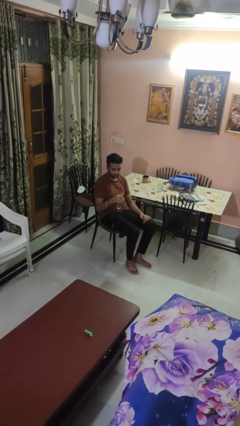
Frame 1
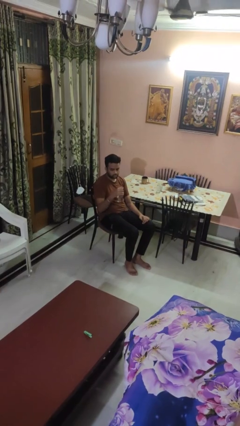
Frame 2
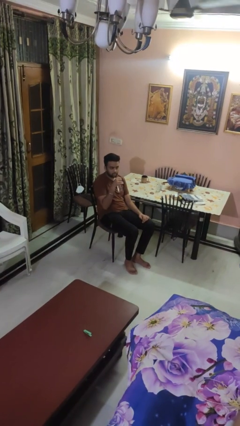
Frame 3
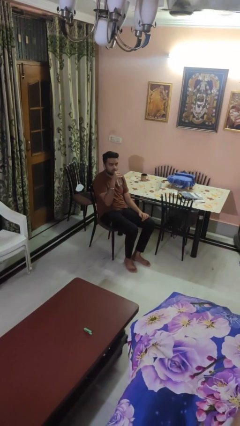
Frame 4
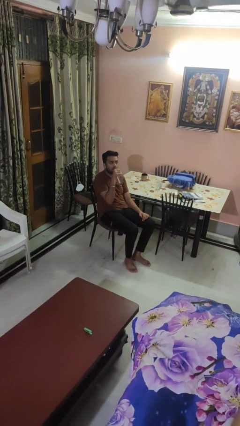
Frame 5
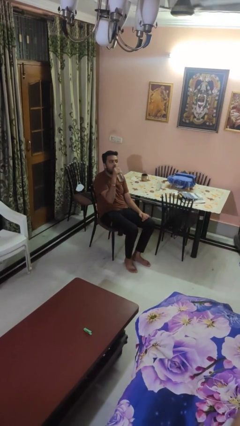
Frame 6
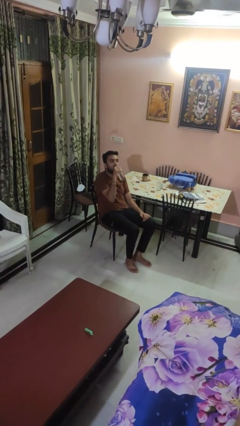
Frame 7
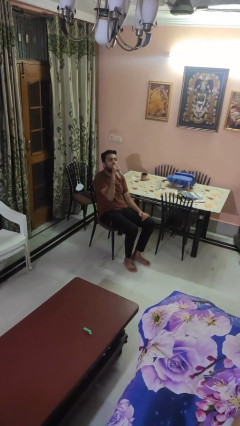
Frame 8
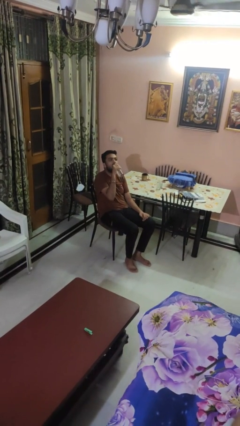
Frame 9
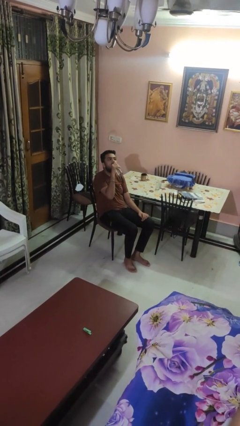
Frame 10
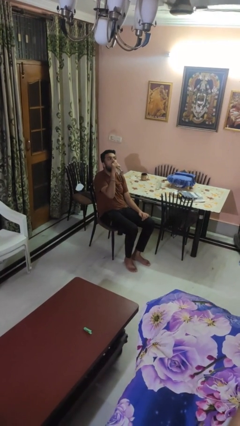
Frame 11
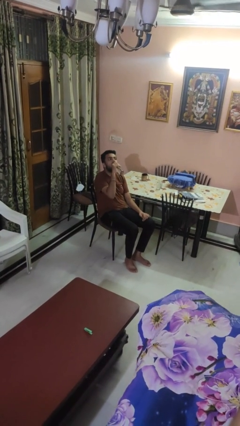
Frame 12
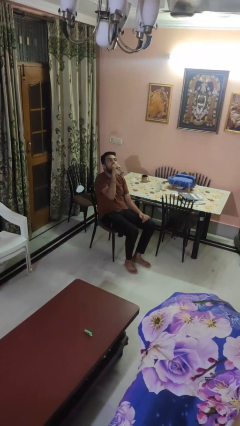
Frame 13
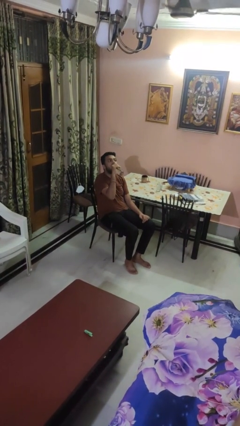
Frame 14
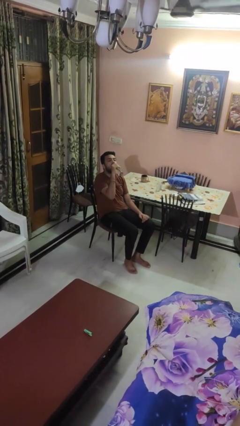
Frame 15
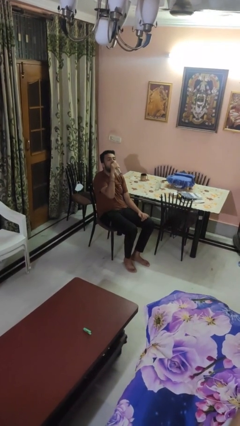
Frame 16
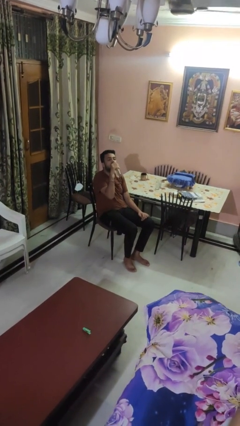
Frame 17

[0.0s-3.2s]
person drinks from bottle

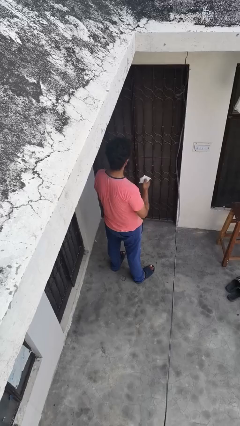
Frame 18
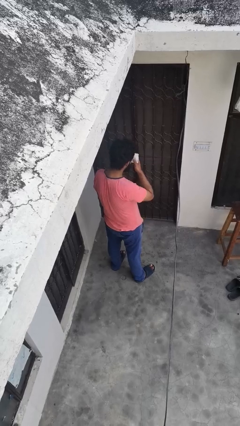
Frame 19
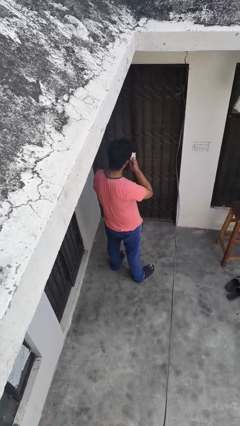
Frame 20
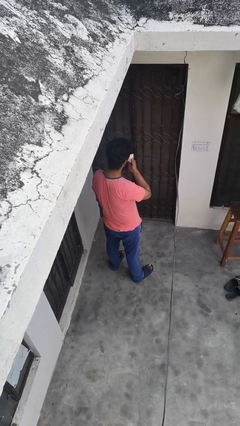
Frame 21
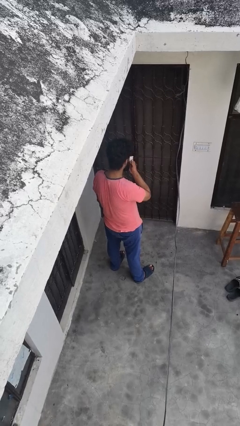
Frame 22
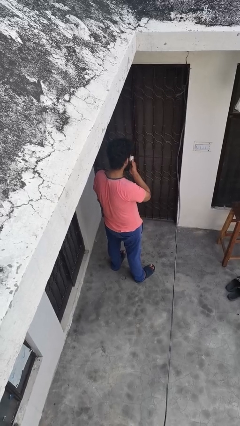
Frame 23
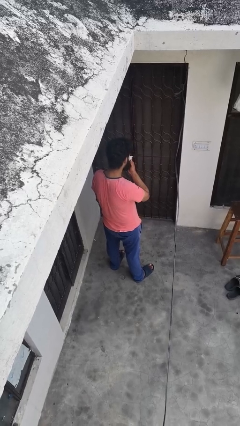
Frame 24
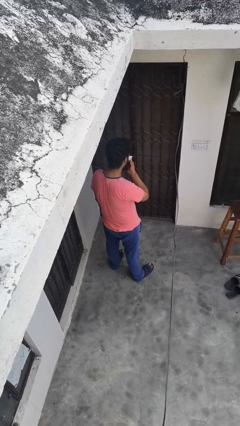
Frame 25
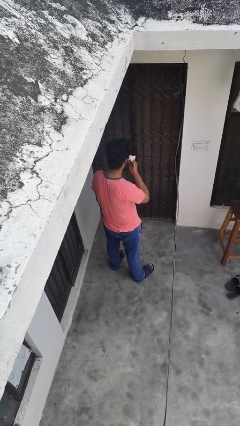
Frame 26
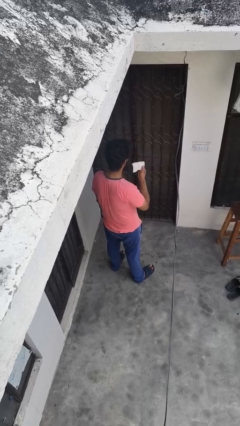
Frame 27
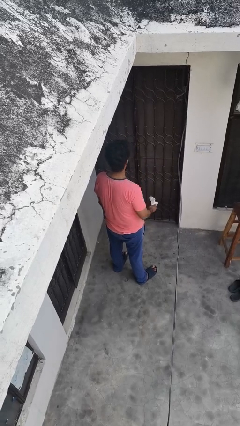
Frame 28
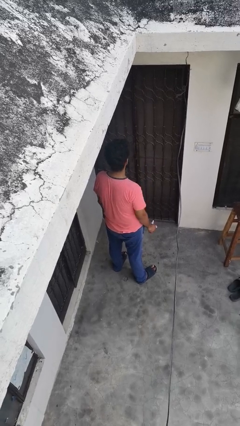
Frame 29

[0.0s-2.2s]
person wipes mouth with napkin

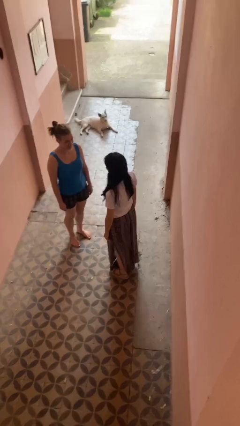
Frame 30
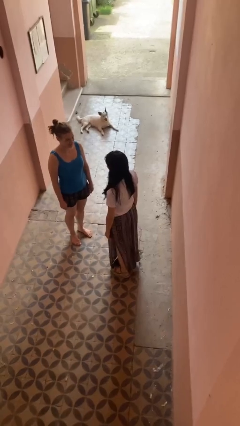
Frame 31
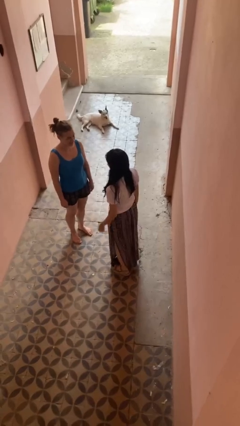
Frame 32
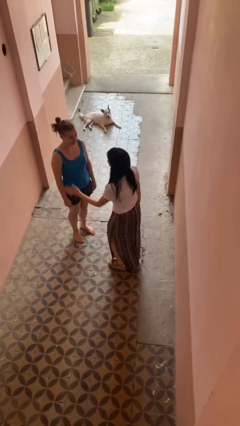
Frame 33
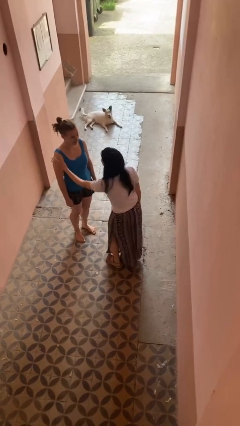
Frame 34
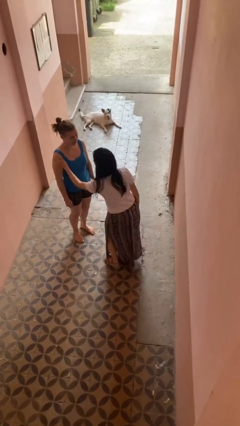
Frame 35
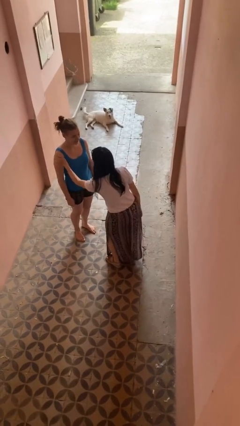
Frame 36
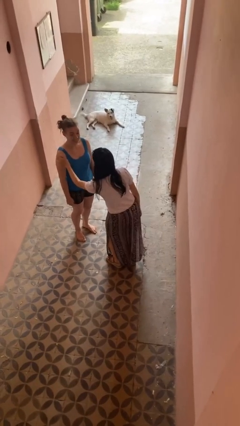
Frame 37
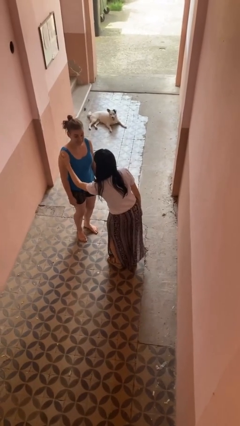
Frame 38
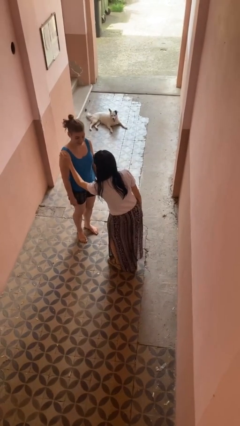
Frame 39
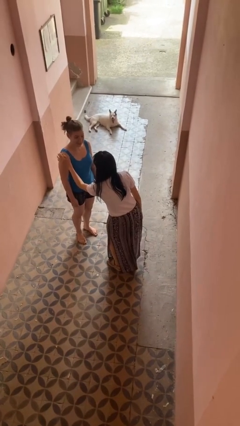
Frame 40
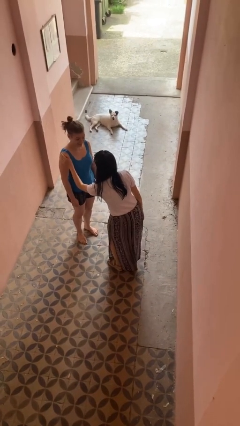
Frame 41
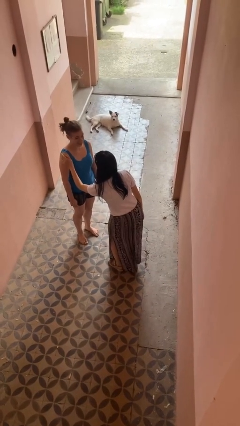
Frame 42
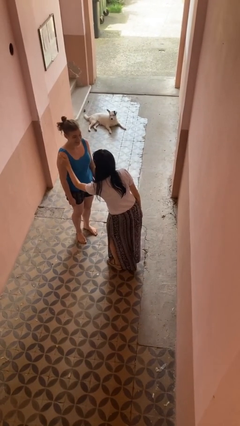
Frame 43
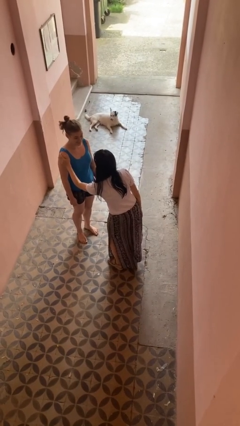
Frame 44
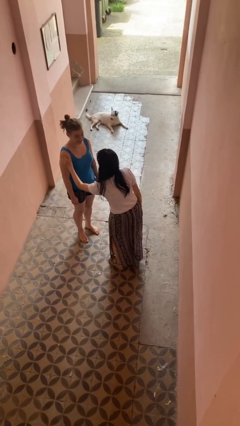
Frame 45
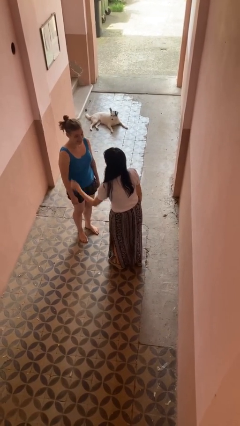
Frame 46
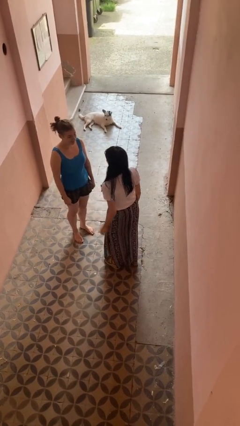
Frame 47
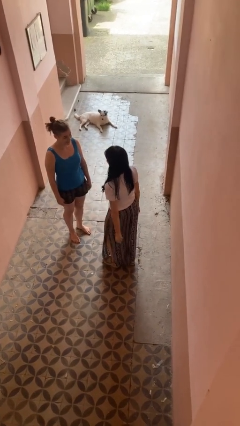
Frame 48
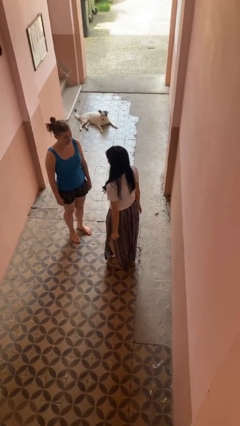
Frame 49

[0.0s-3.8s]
person pounds shoulders of person

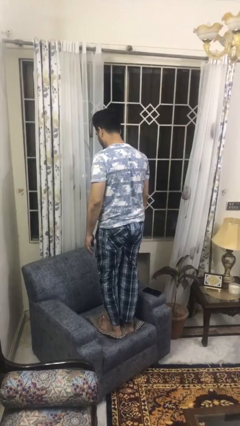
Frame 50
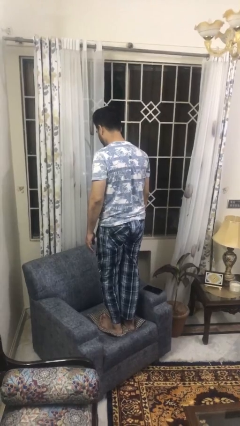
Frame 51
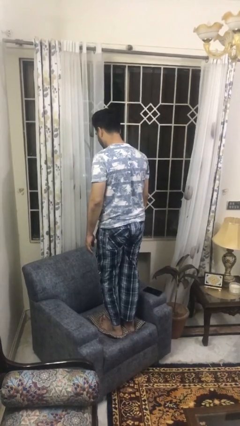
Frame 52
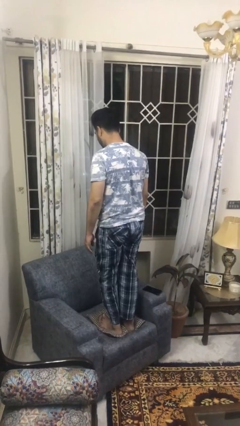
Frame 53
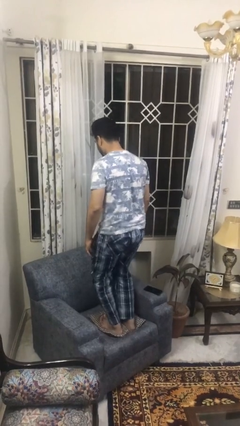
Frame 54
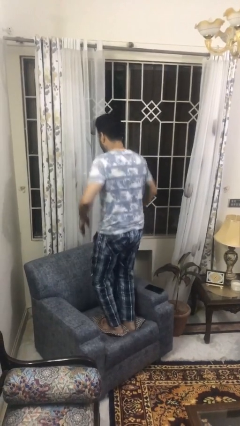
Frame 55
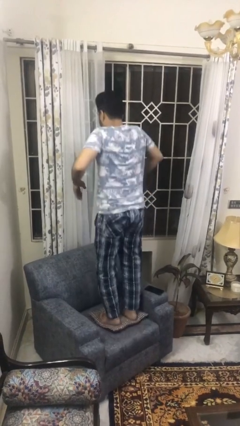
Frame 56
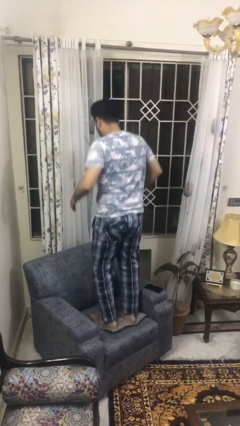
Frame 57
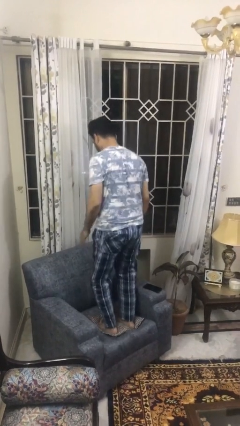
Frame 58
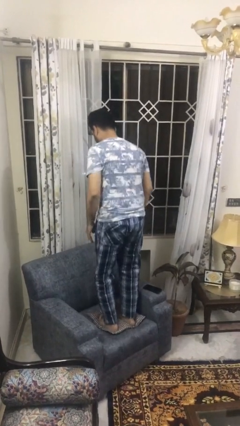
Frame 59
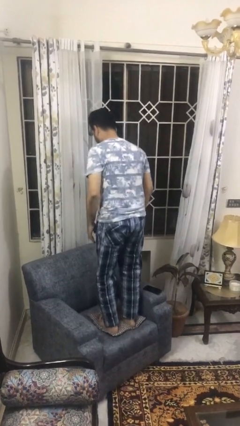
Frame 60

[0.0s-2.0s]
person jumps on couch

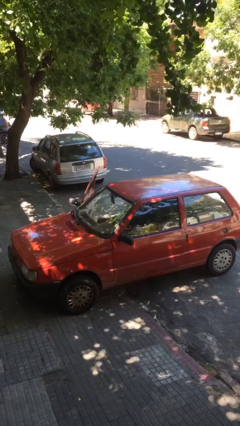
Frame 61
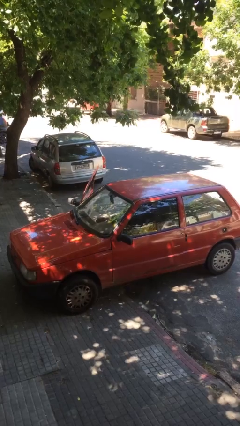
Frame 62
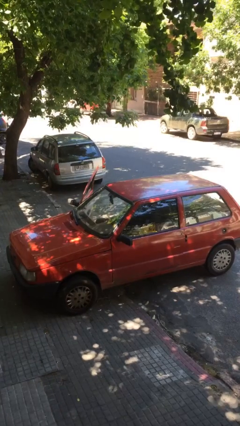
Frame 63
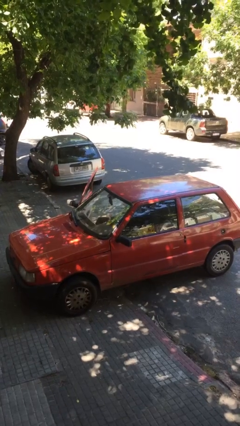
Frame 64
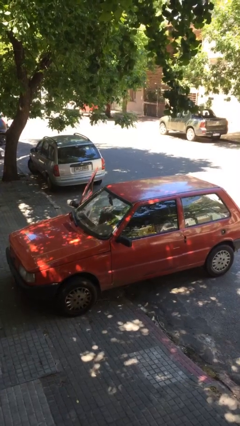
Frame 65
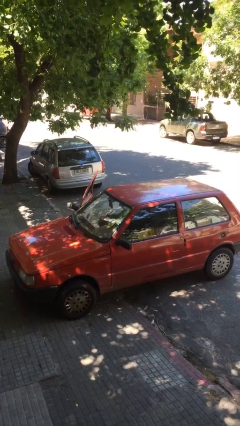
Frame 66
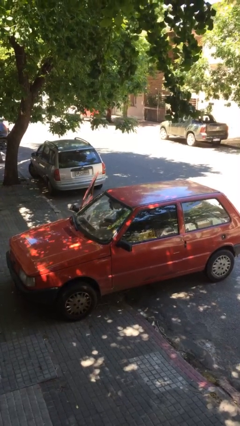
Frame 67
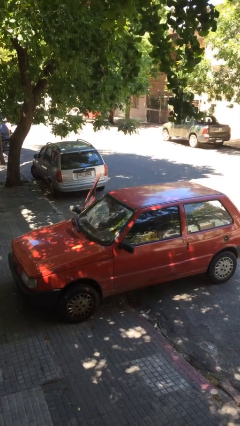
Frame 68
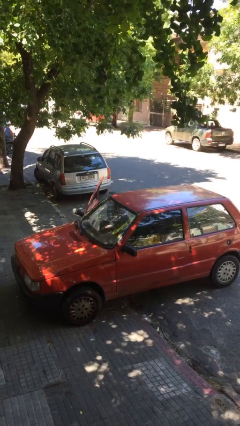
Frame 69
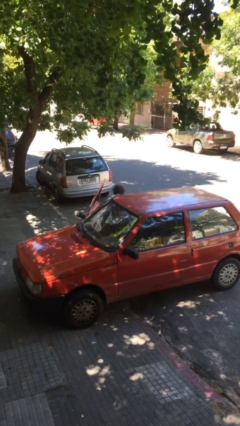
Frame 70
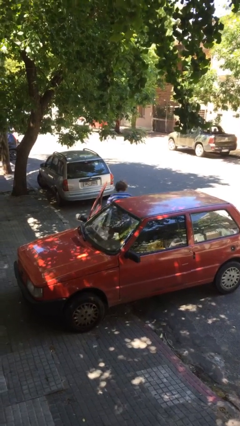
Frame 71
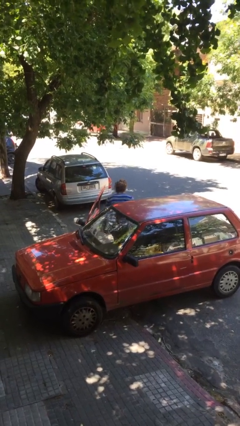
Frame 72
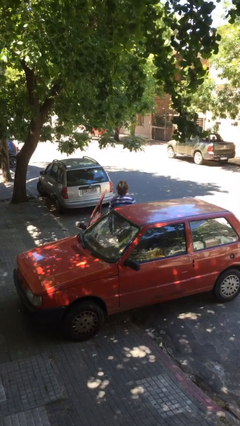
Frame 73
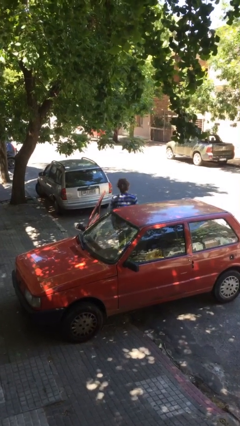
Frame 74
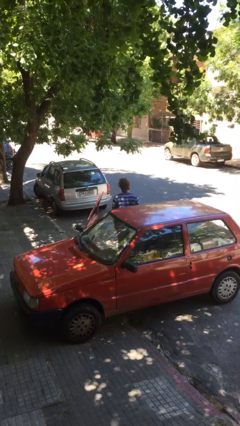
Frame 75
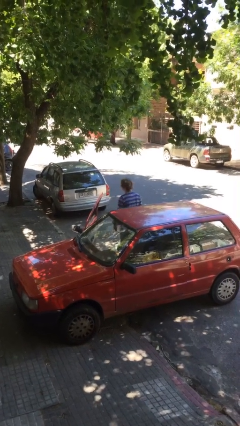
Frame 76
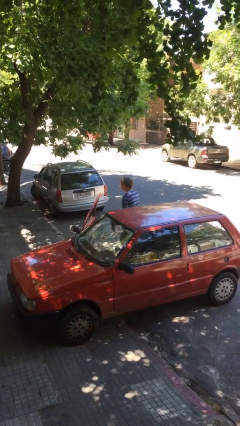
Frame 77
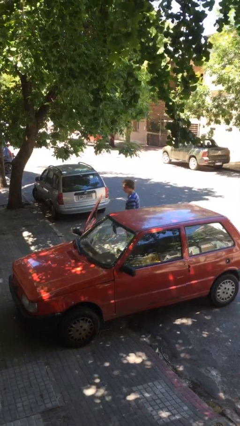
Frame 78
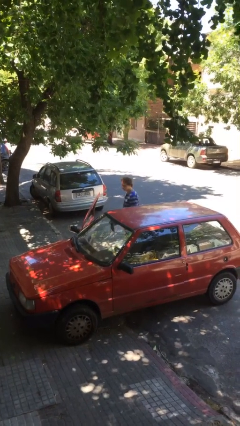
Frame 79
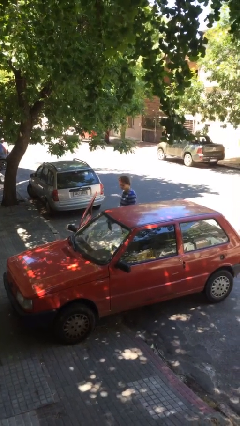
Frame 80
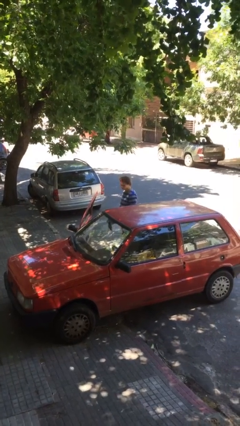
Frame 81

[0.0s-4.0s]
person exits car

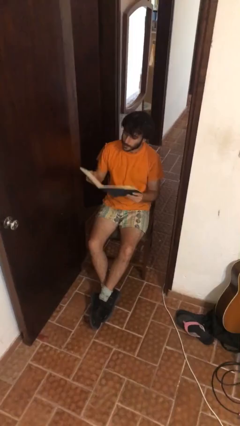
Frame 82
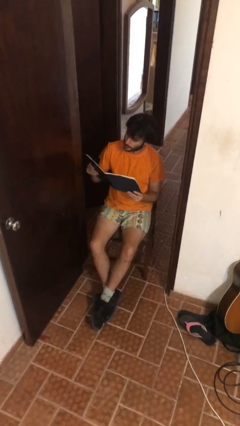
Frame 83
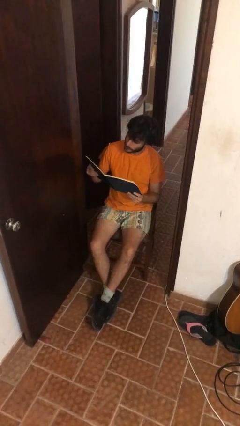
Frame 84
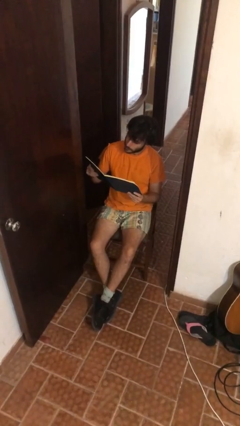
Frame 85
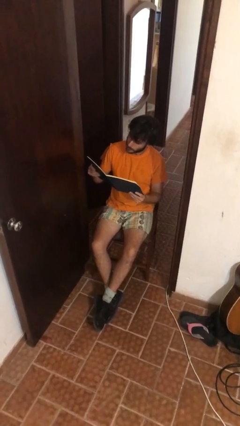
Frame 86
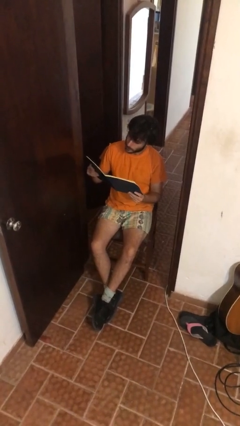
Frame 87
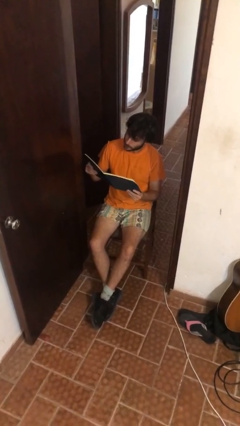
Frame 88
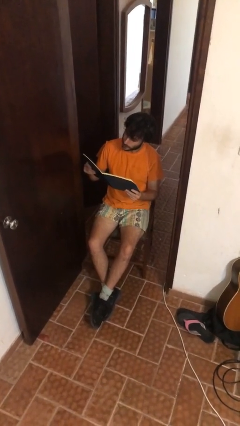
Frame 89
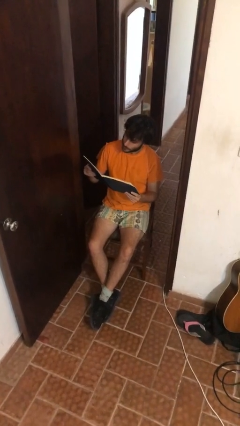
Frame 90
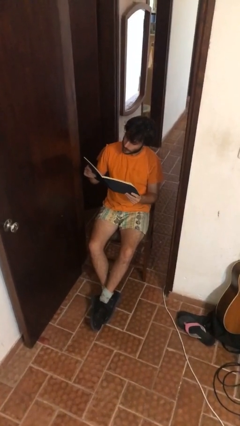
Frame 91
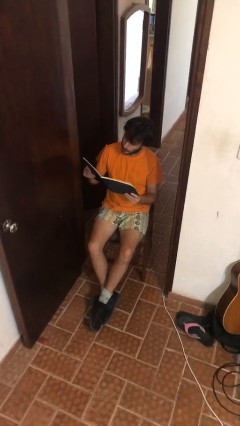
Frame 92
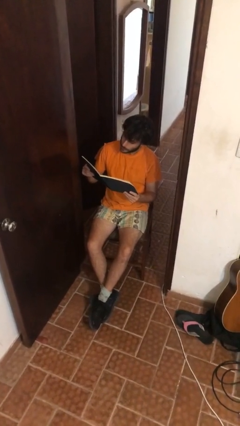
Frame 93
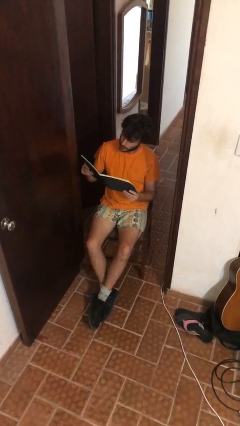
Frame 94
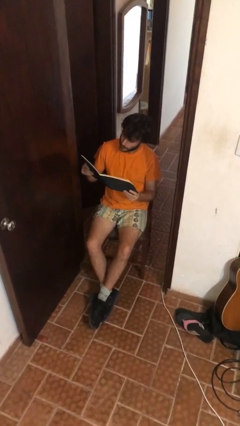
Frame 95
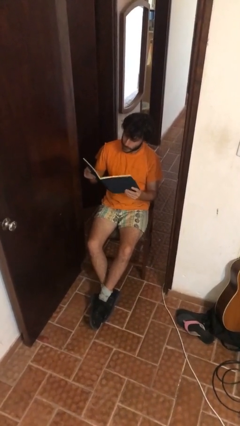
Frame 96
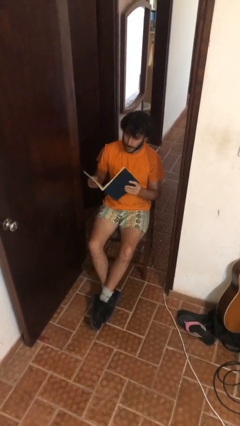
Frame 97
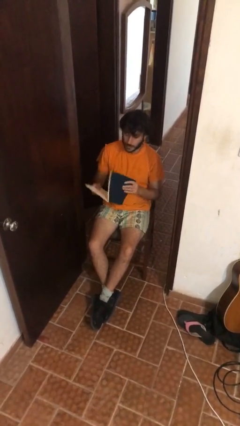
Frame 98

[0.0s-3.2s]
person reads document
